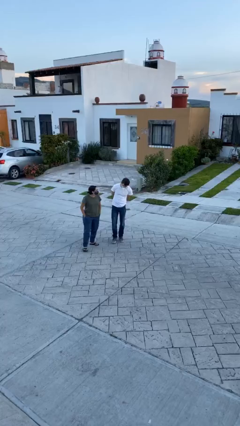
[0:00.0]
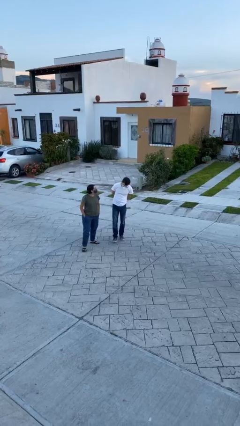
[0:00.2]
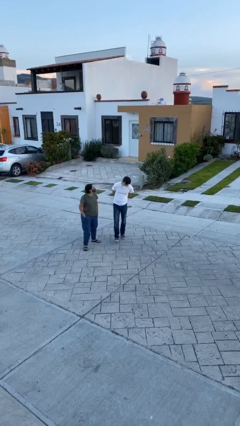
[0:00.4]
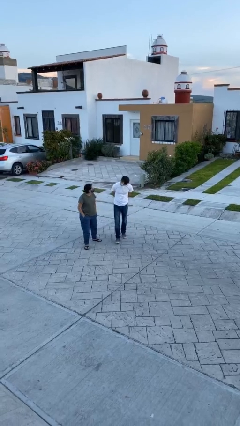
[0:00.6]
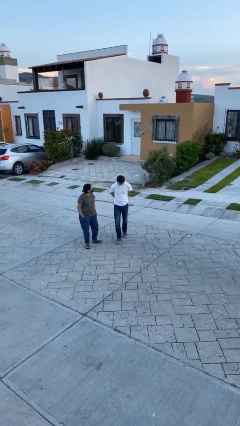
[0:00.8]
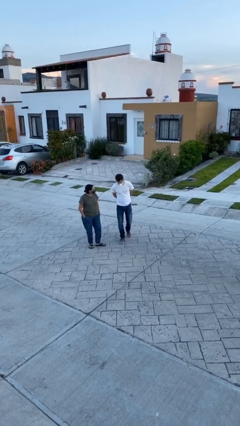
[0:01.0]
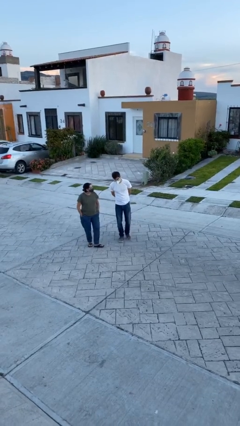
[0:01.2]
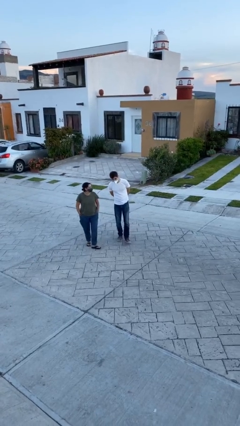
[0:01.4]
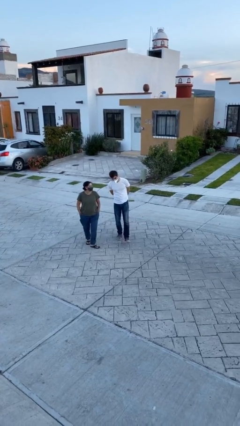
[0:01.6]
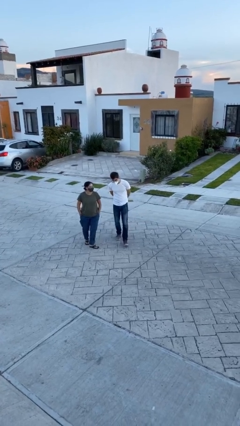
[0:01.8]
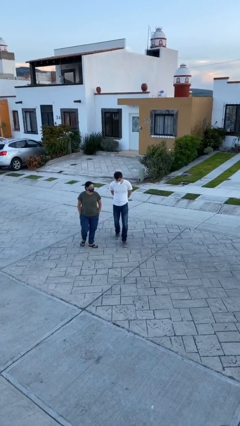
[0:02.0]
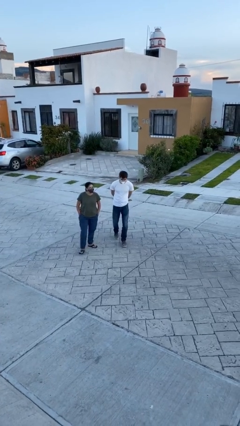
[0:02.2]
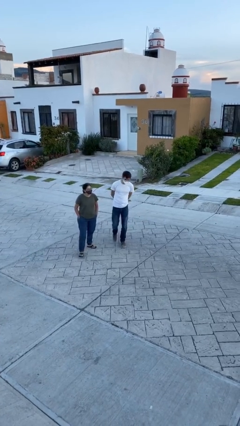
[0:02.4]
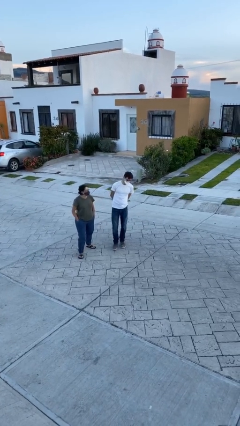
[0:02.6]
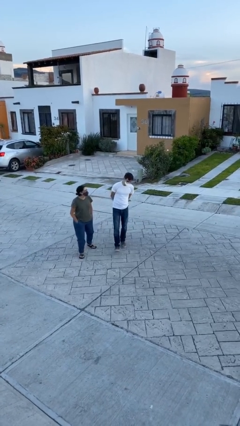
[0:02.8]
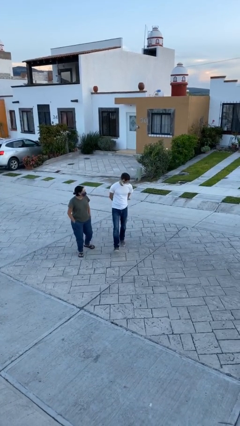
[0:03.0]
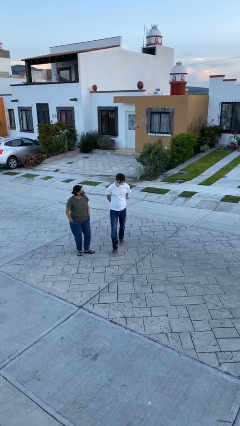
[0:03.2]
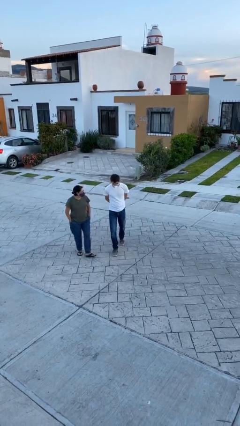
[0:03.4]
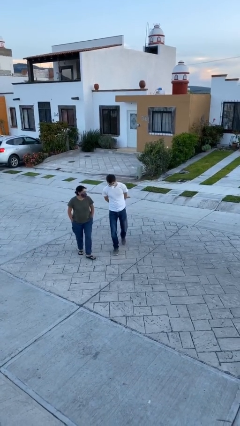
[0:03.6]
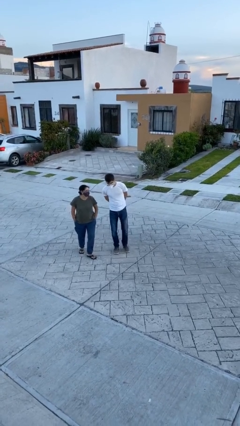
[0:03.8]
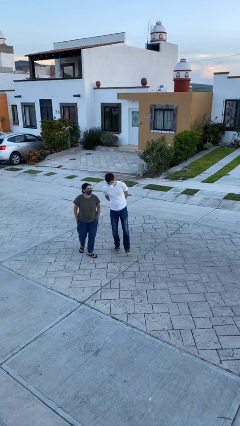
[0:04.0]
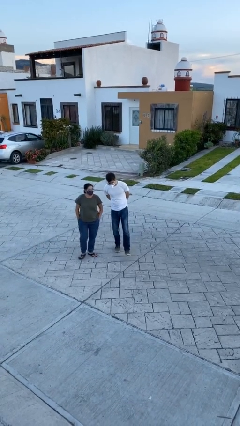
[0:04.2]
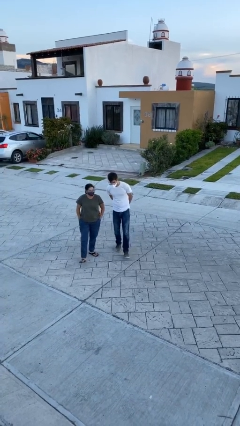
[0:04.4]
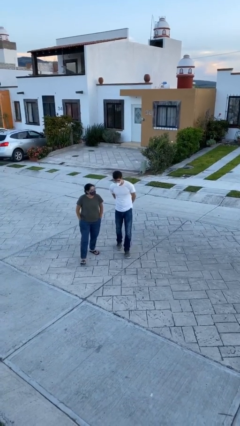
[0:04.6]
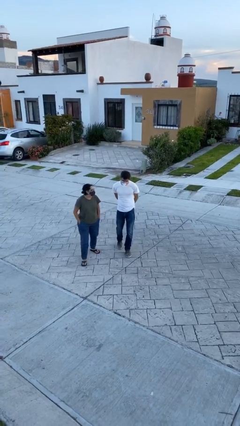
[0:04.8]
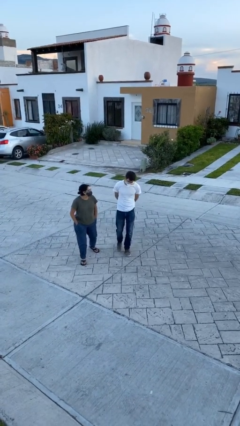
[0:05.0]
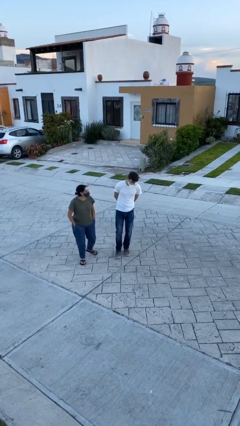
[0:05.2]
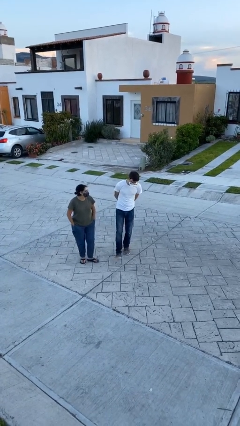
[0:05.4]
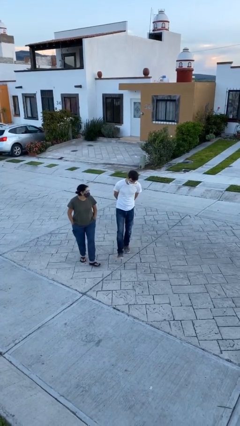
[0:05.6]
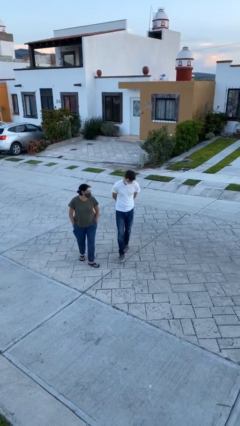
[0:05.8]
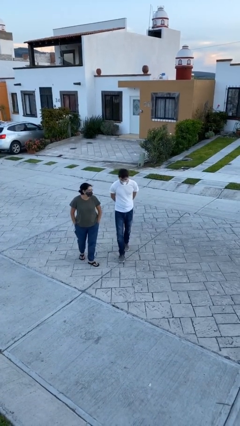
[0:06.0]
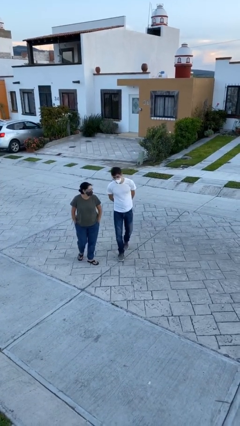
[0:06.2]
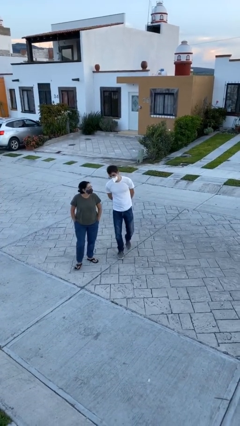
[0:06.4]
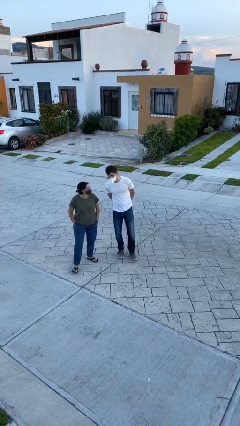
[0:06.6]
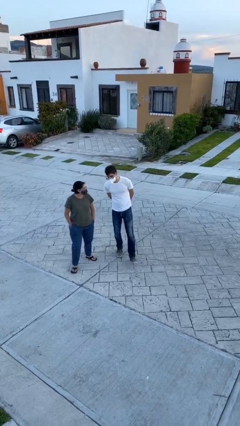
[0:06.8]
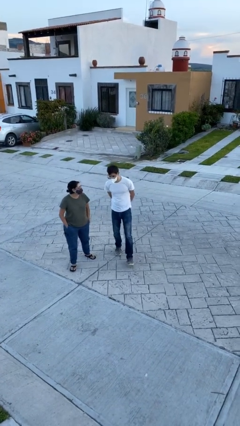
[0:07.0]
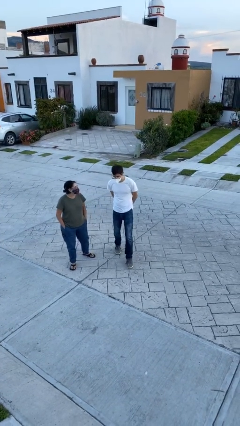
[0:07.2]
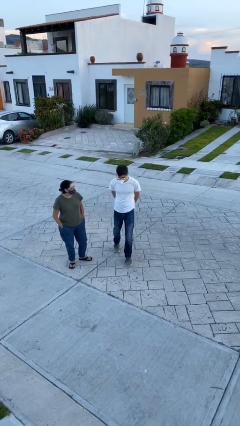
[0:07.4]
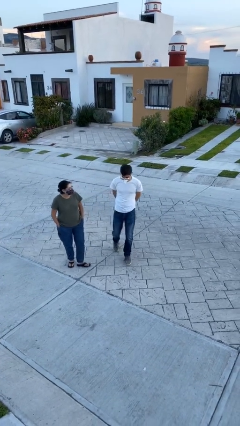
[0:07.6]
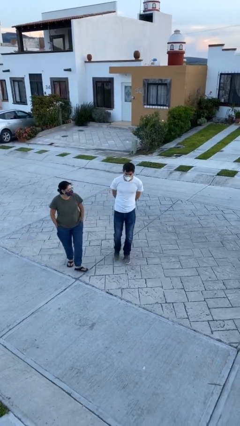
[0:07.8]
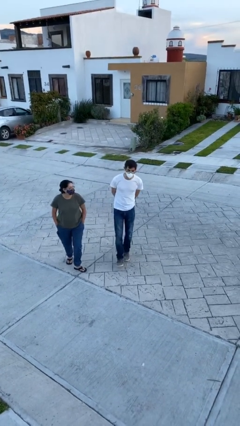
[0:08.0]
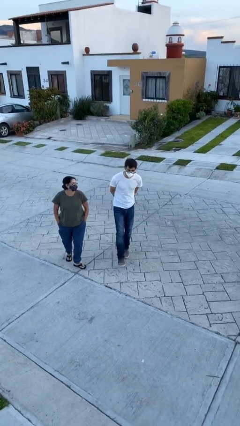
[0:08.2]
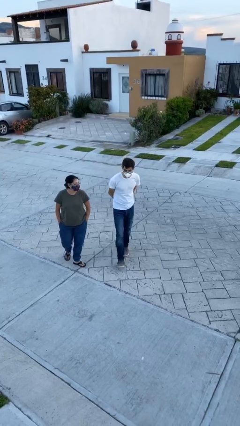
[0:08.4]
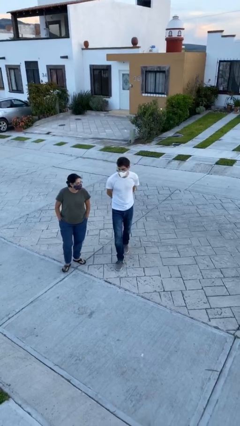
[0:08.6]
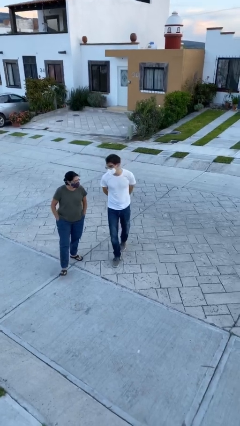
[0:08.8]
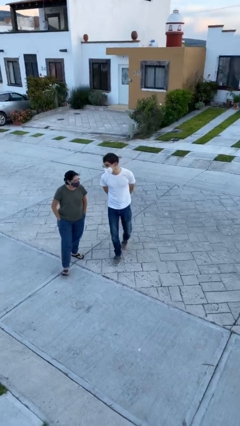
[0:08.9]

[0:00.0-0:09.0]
person talks to person

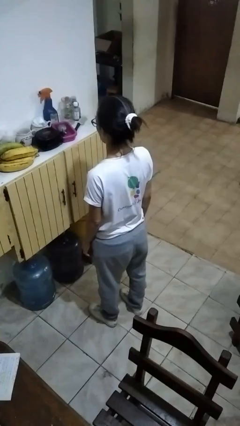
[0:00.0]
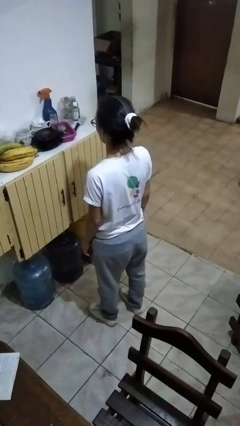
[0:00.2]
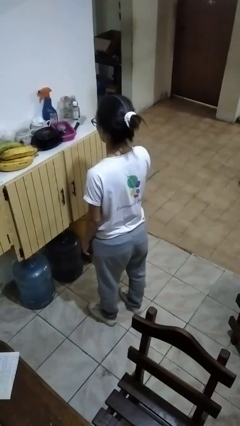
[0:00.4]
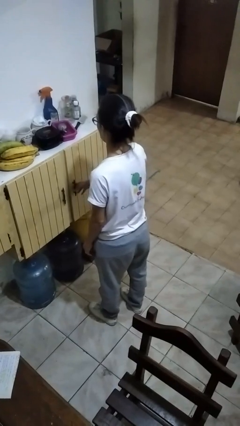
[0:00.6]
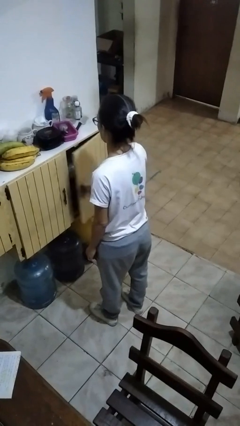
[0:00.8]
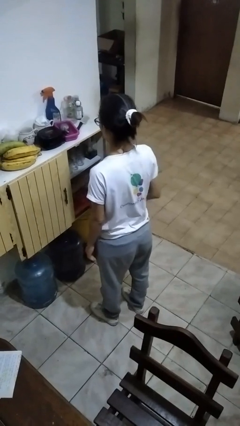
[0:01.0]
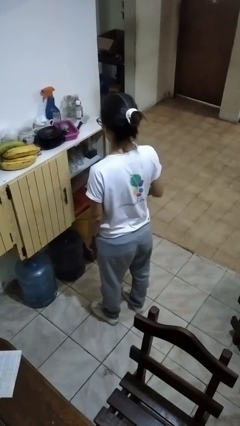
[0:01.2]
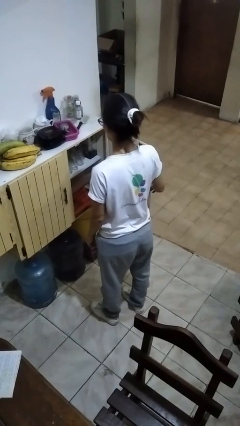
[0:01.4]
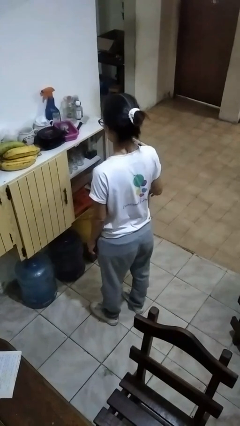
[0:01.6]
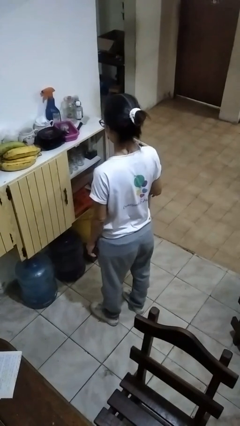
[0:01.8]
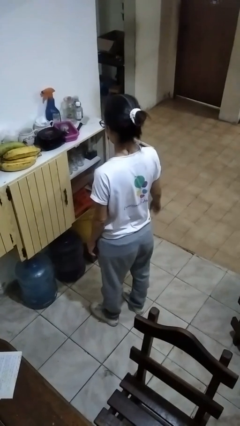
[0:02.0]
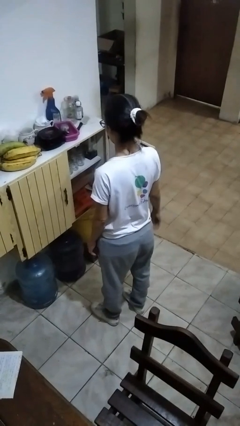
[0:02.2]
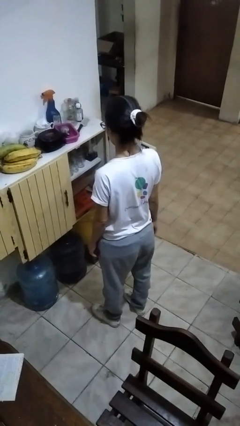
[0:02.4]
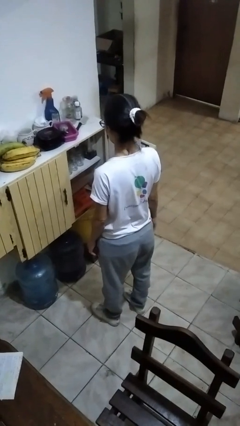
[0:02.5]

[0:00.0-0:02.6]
person opens kitchen drawer

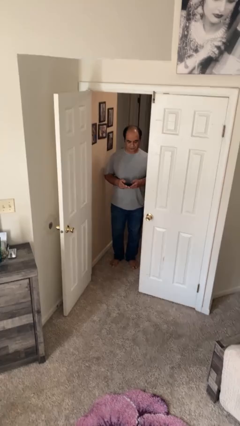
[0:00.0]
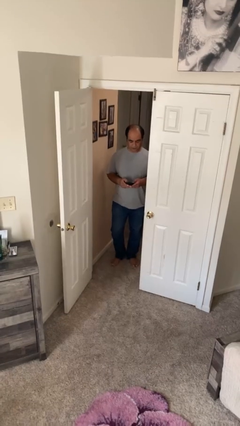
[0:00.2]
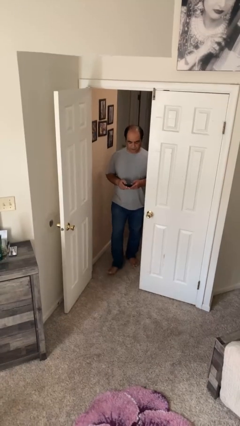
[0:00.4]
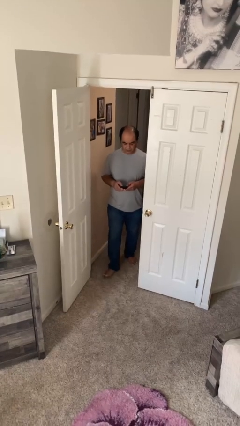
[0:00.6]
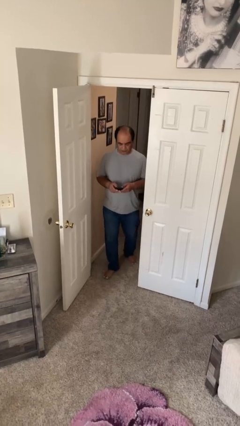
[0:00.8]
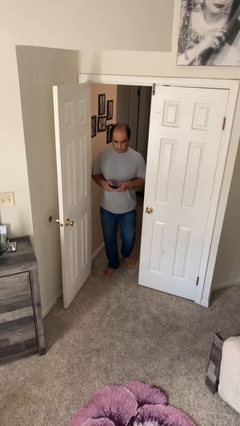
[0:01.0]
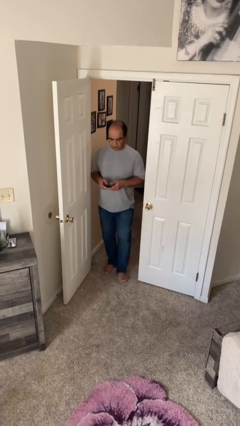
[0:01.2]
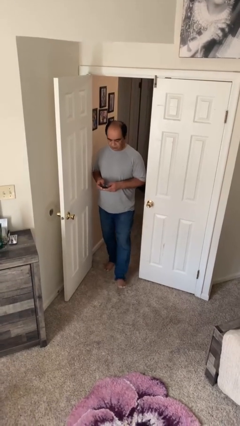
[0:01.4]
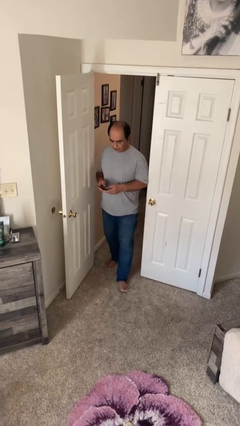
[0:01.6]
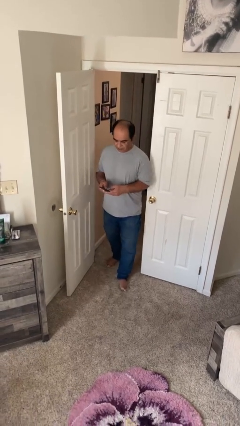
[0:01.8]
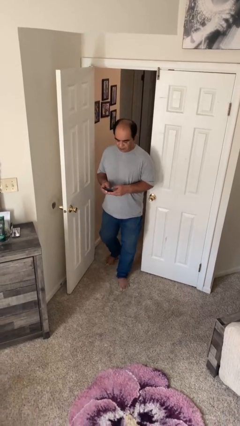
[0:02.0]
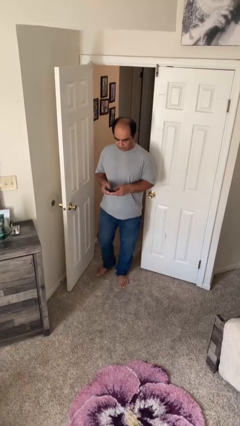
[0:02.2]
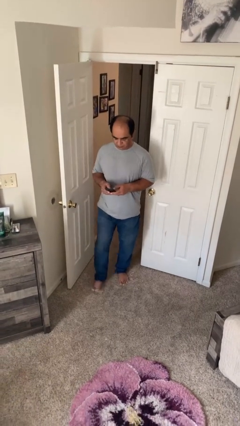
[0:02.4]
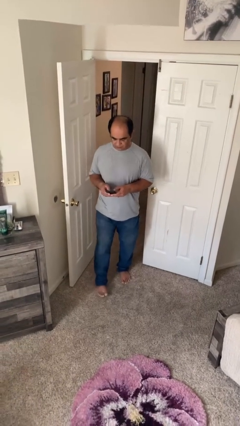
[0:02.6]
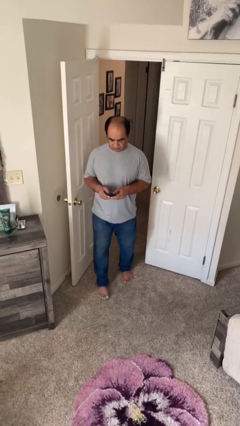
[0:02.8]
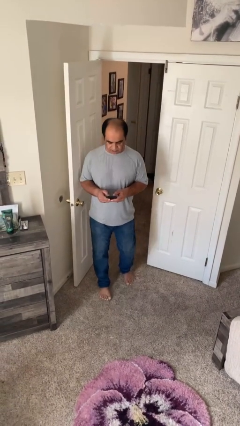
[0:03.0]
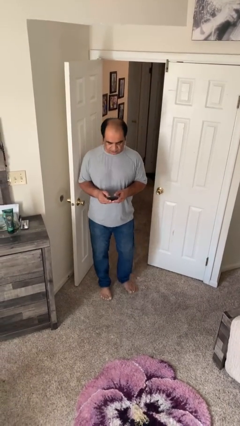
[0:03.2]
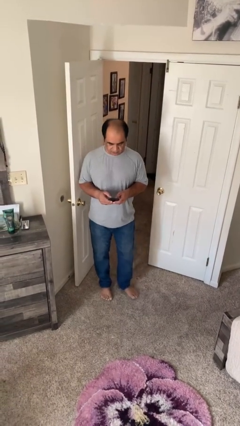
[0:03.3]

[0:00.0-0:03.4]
person enters scene through structure

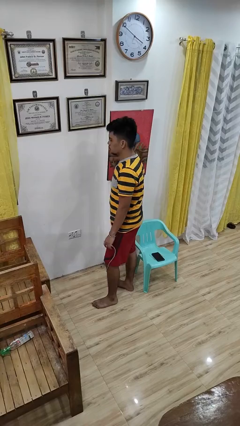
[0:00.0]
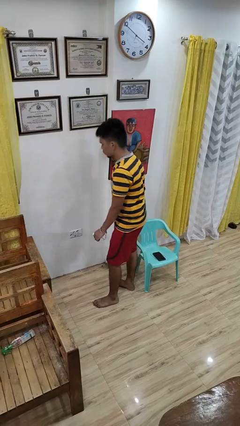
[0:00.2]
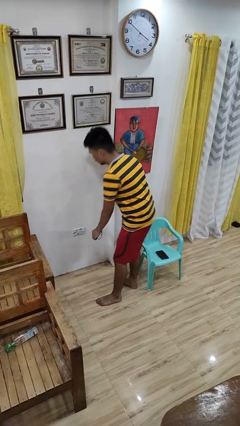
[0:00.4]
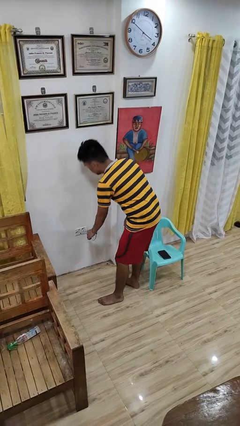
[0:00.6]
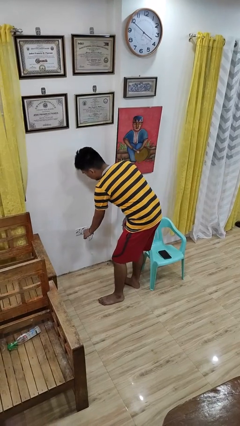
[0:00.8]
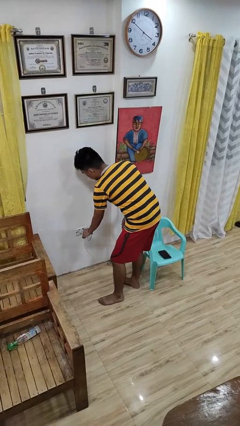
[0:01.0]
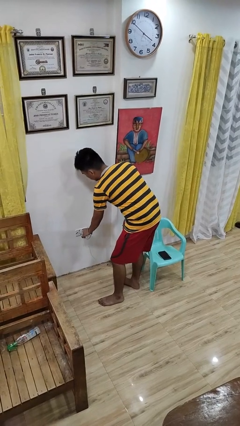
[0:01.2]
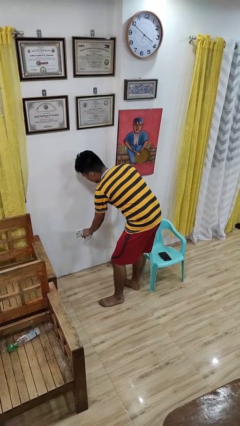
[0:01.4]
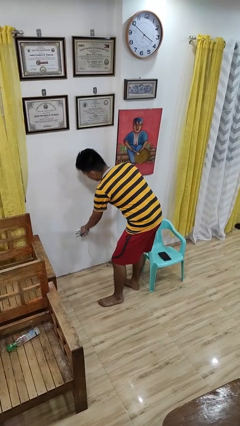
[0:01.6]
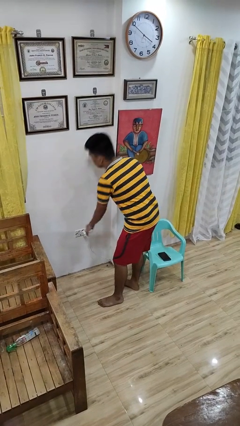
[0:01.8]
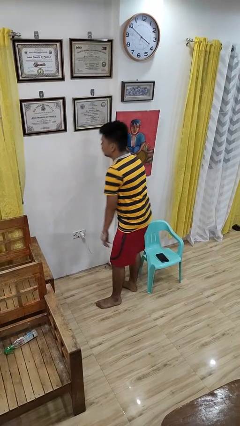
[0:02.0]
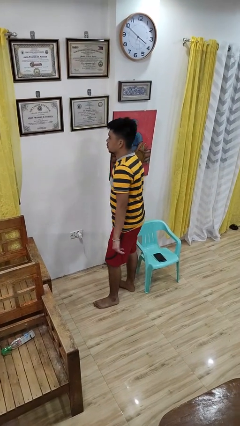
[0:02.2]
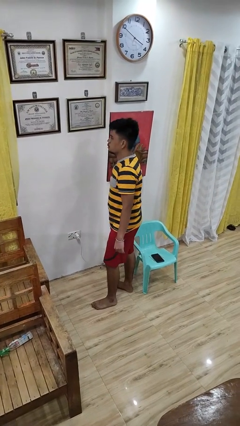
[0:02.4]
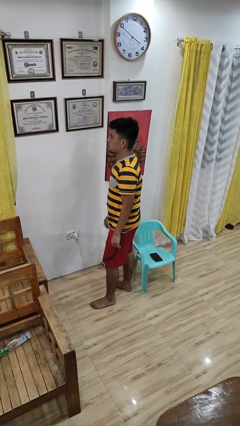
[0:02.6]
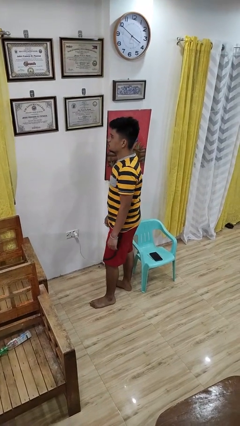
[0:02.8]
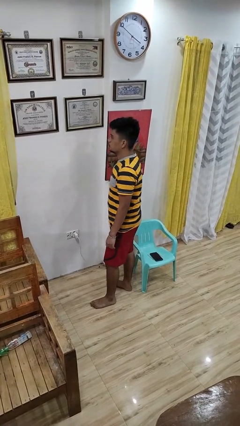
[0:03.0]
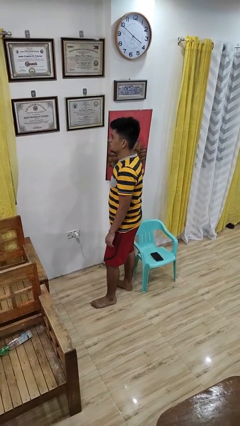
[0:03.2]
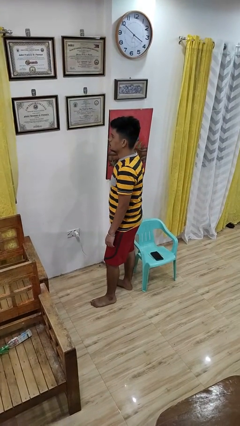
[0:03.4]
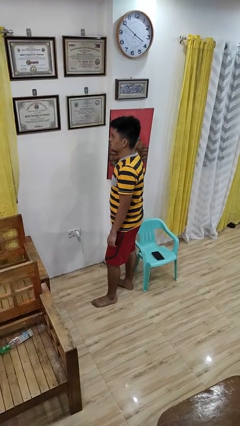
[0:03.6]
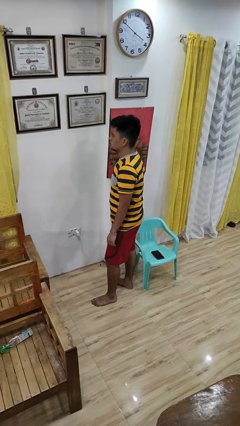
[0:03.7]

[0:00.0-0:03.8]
person plugs into electrical socket
